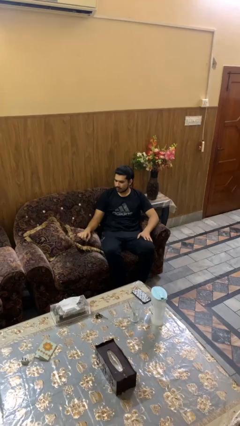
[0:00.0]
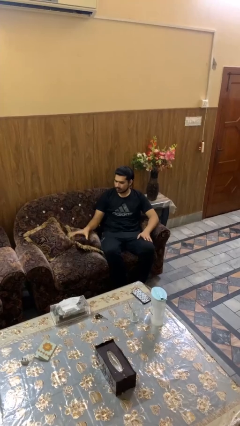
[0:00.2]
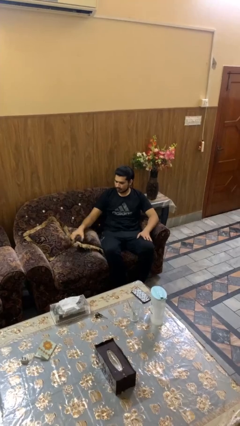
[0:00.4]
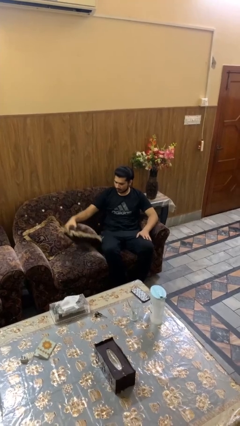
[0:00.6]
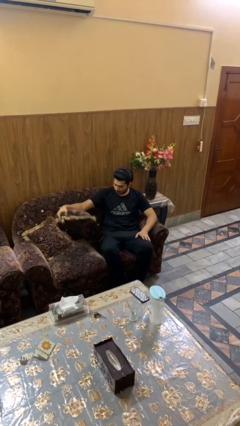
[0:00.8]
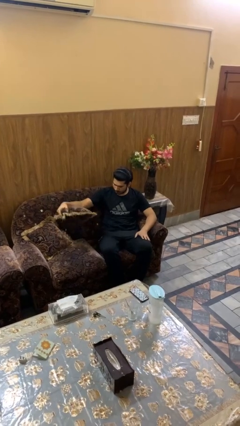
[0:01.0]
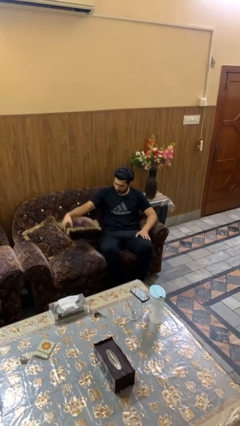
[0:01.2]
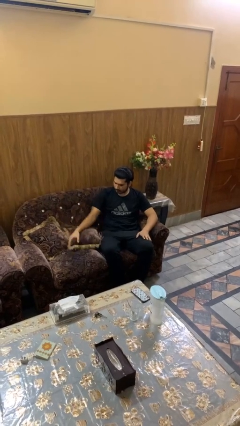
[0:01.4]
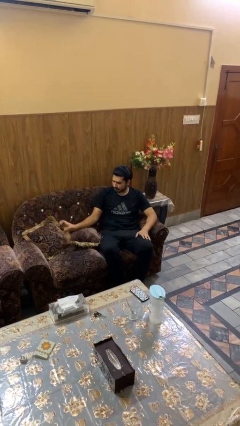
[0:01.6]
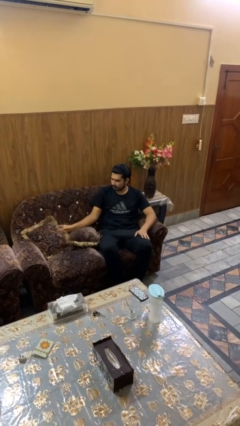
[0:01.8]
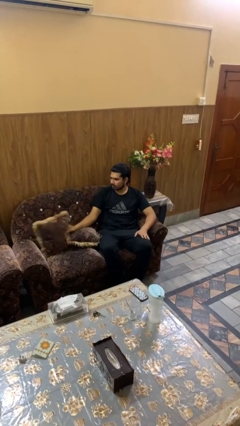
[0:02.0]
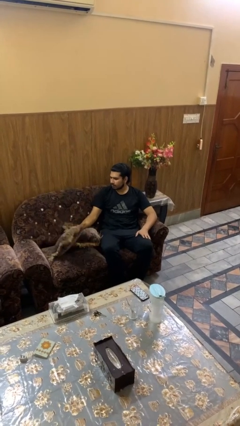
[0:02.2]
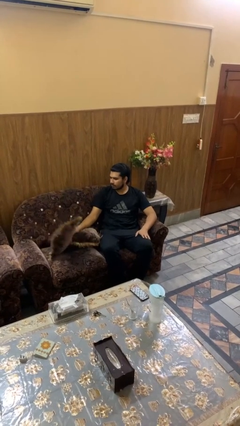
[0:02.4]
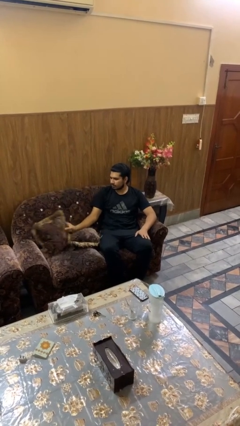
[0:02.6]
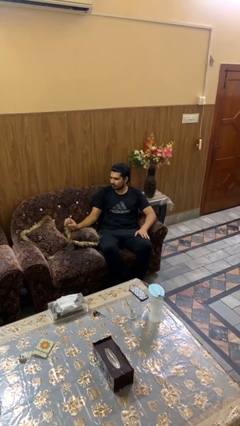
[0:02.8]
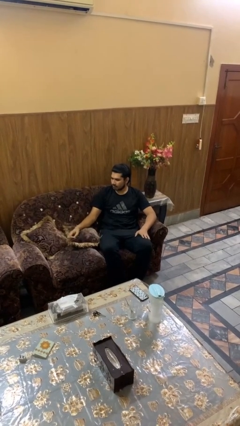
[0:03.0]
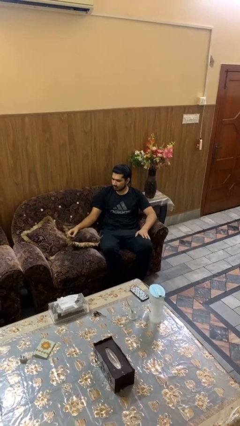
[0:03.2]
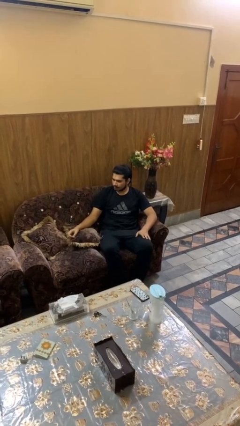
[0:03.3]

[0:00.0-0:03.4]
person searches in couch

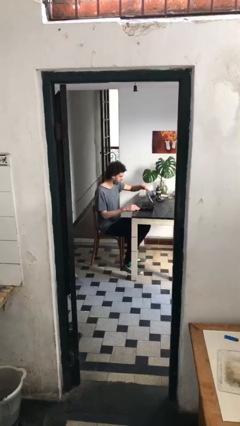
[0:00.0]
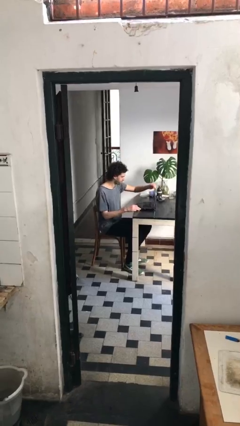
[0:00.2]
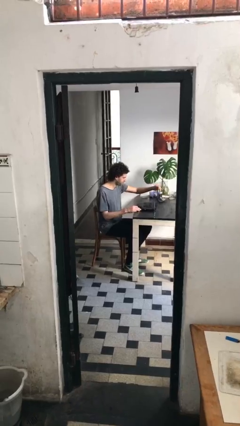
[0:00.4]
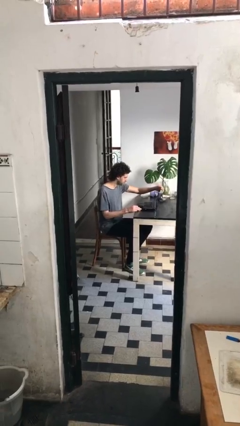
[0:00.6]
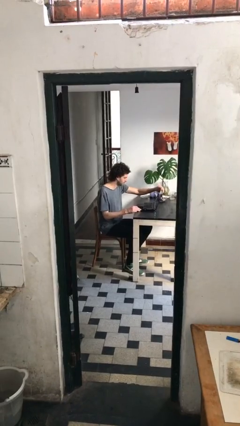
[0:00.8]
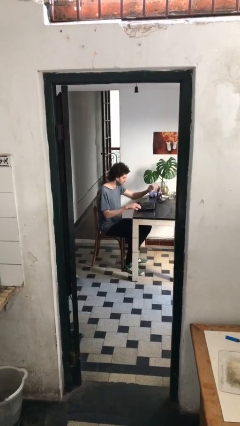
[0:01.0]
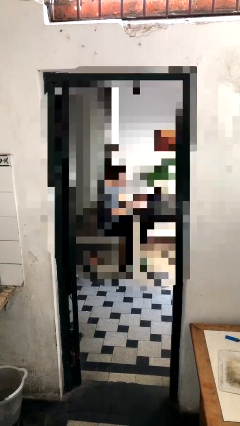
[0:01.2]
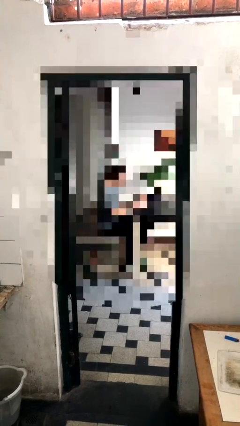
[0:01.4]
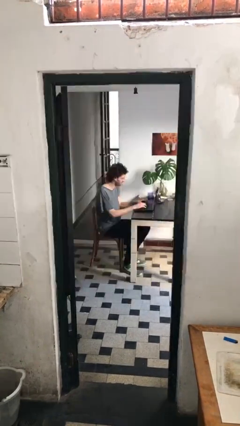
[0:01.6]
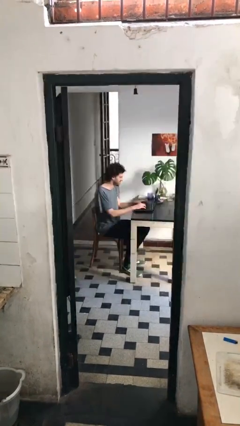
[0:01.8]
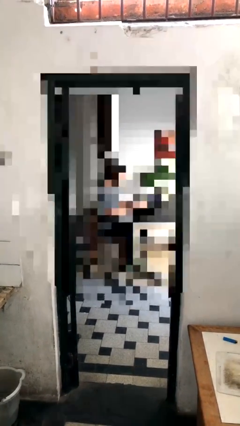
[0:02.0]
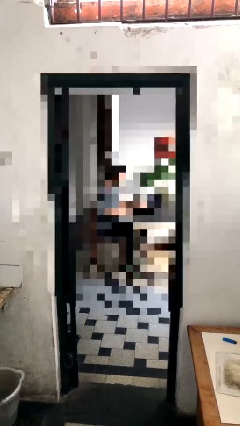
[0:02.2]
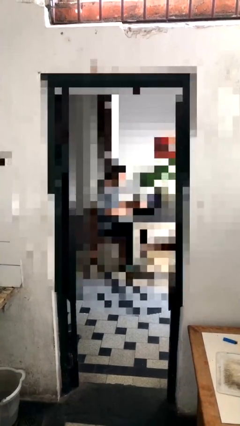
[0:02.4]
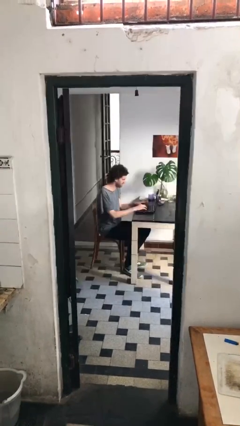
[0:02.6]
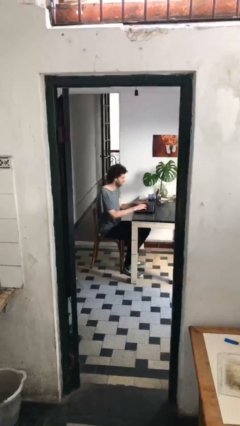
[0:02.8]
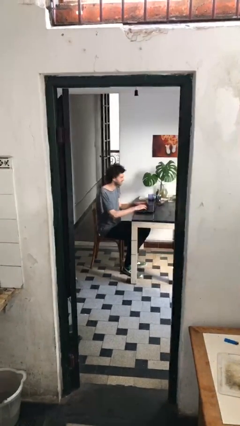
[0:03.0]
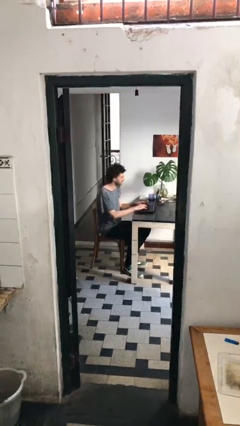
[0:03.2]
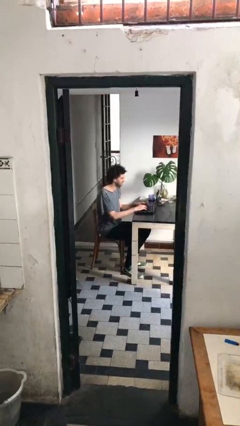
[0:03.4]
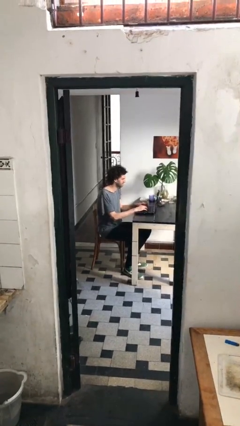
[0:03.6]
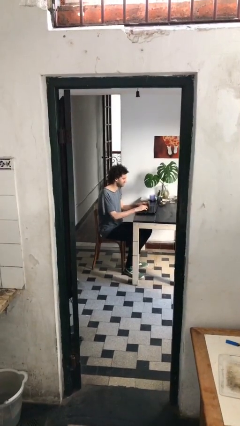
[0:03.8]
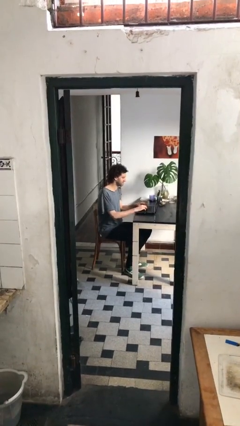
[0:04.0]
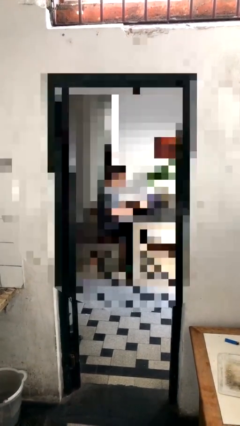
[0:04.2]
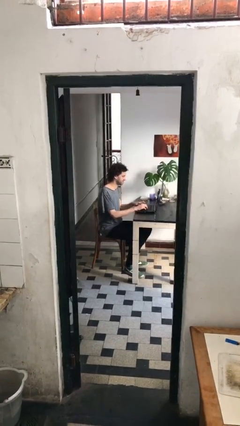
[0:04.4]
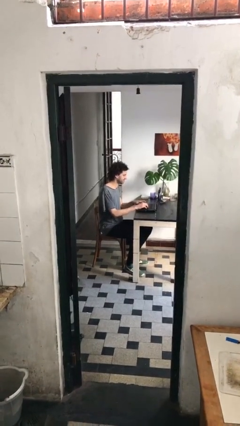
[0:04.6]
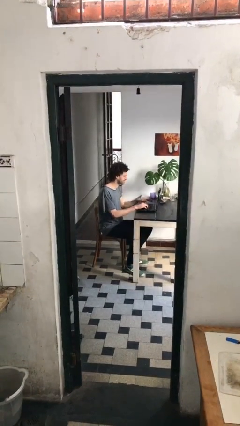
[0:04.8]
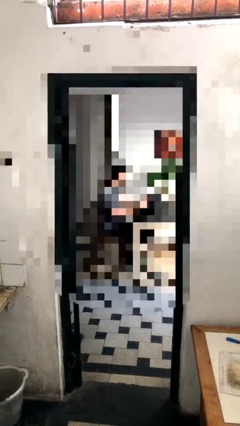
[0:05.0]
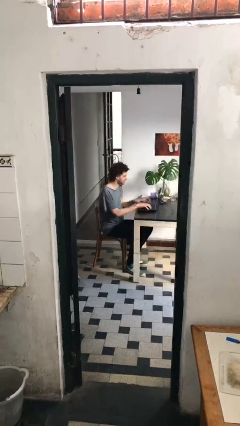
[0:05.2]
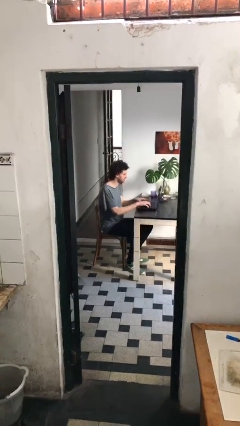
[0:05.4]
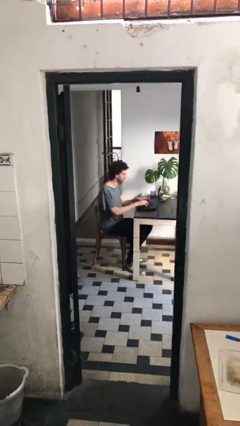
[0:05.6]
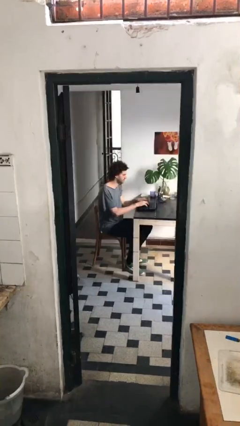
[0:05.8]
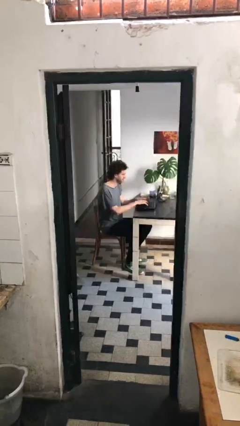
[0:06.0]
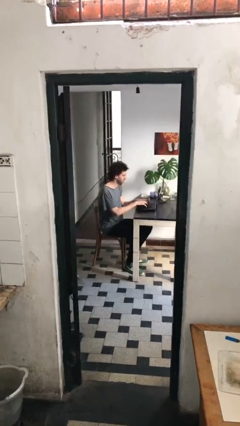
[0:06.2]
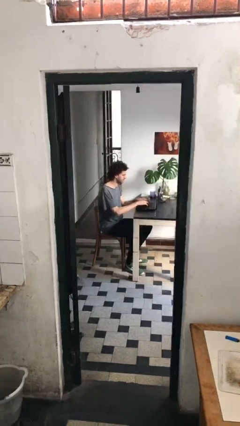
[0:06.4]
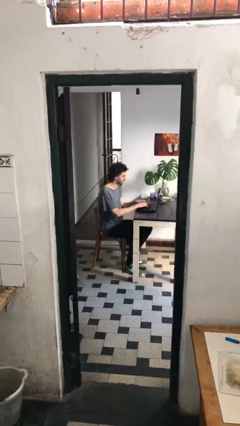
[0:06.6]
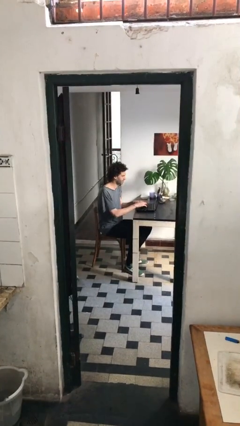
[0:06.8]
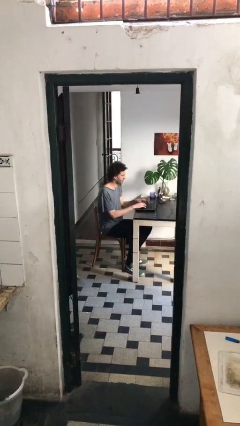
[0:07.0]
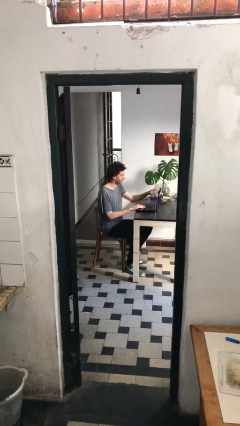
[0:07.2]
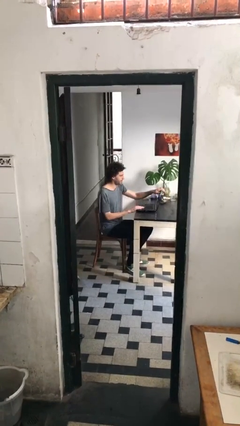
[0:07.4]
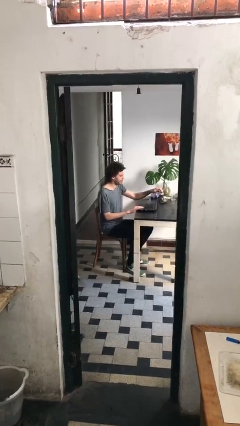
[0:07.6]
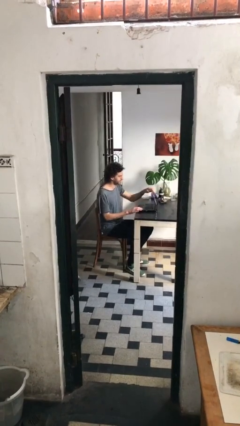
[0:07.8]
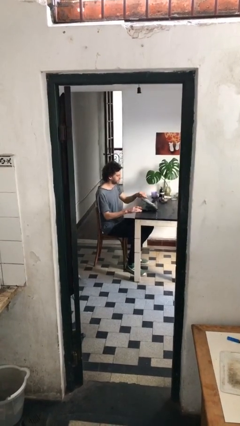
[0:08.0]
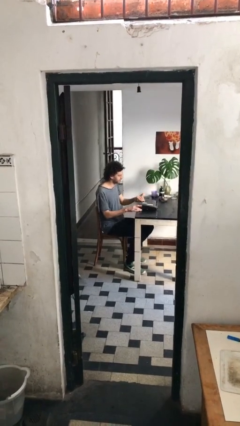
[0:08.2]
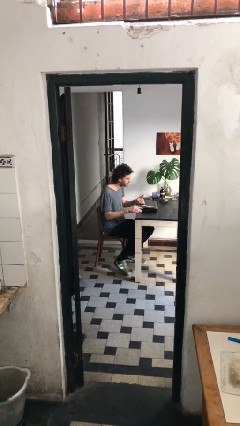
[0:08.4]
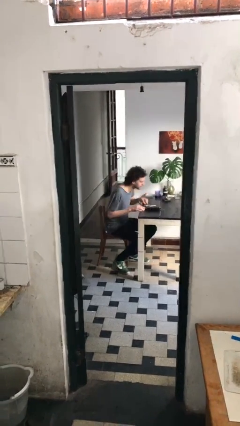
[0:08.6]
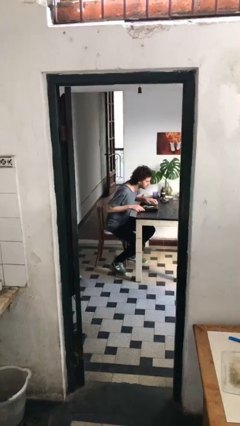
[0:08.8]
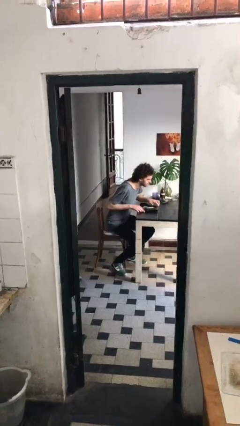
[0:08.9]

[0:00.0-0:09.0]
person interacts with laptop

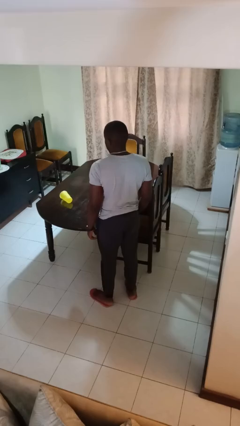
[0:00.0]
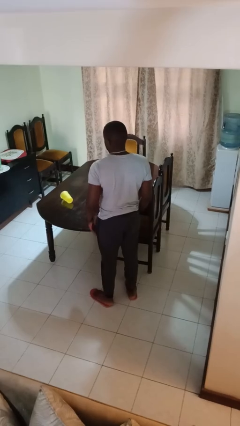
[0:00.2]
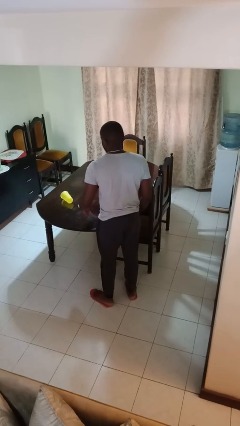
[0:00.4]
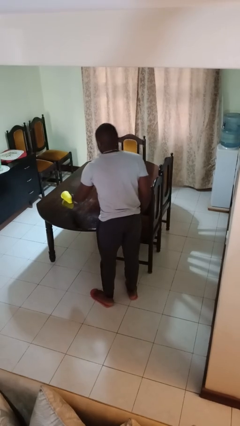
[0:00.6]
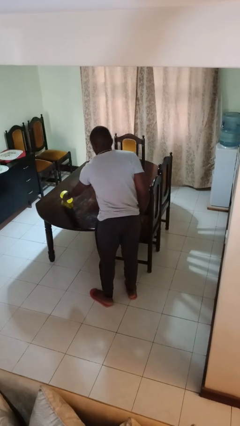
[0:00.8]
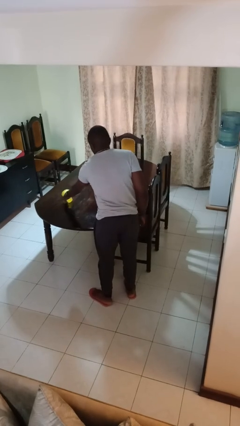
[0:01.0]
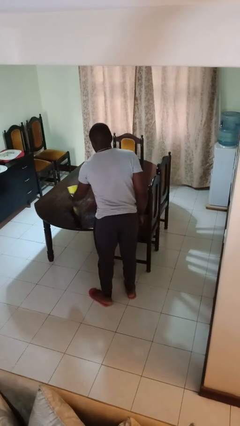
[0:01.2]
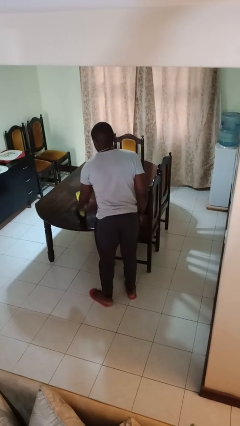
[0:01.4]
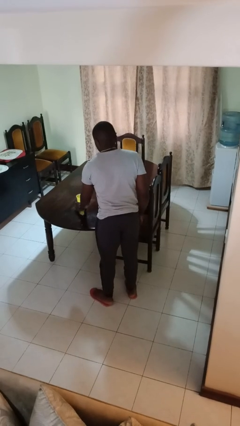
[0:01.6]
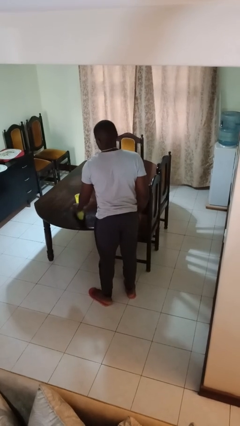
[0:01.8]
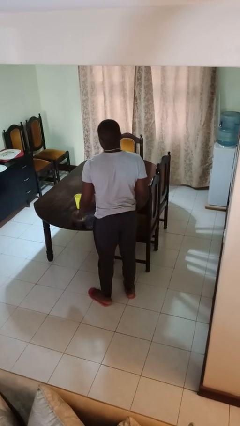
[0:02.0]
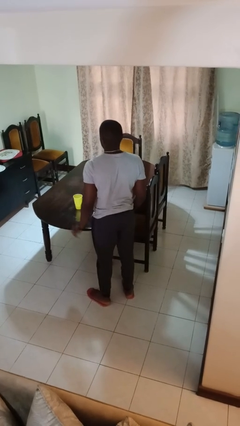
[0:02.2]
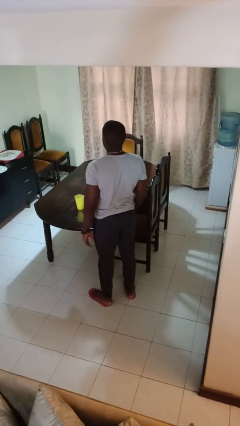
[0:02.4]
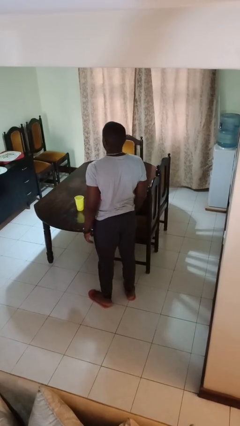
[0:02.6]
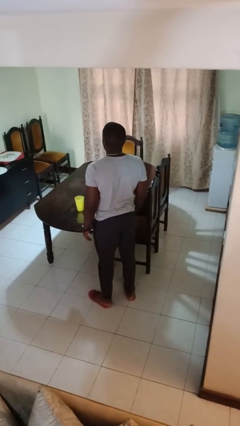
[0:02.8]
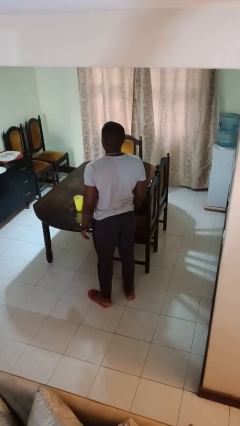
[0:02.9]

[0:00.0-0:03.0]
person sets upright glass

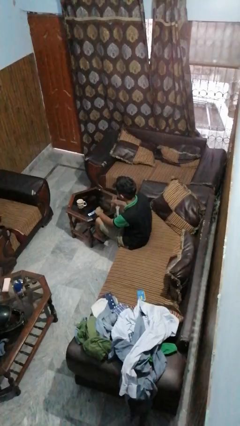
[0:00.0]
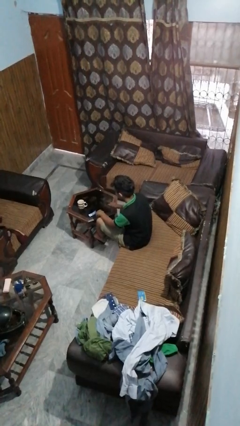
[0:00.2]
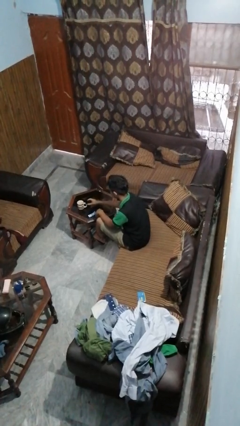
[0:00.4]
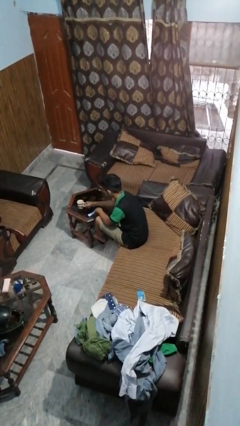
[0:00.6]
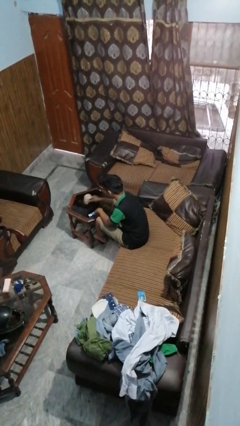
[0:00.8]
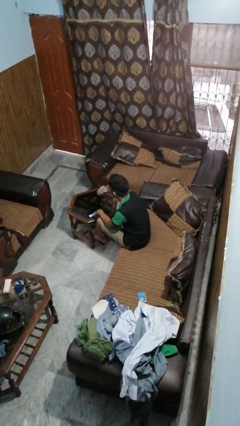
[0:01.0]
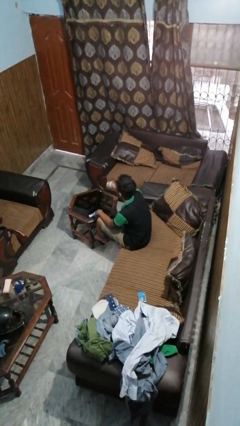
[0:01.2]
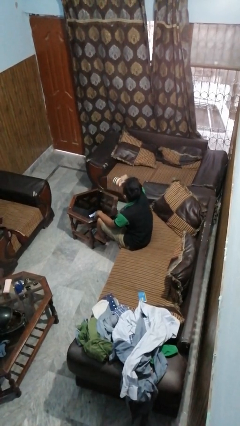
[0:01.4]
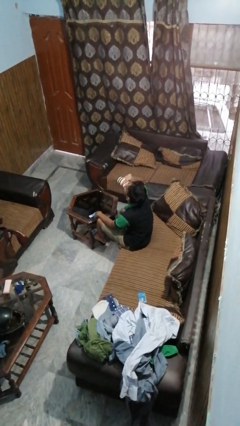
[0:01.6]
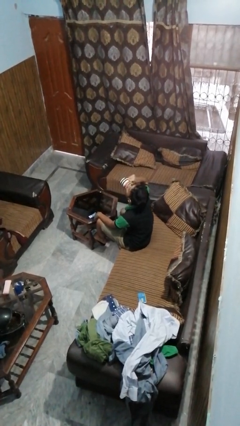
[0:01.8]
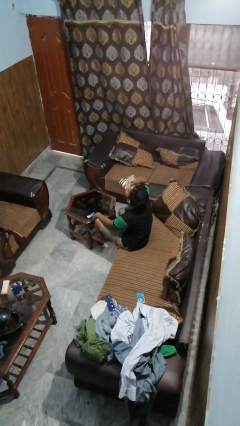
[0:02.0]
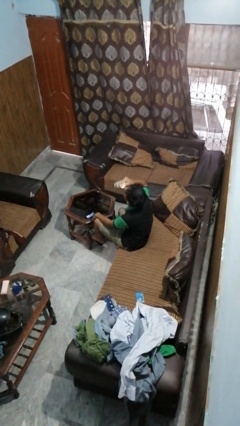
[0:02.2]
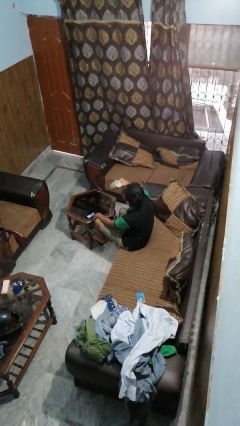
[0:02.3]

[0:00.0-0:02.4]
person drinks from cup
